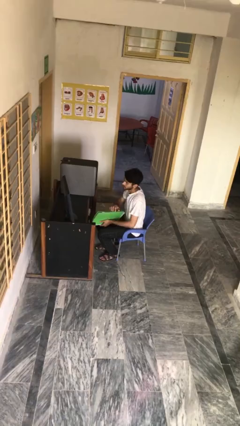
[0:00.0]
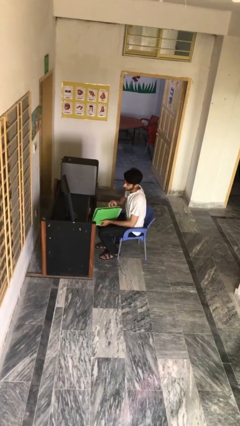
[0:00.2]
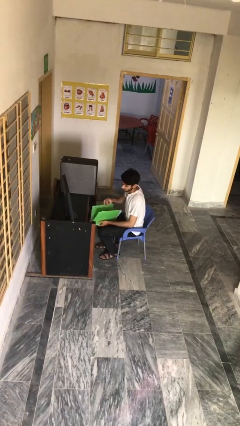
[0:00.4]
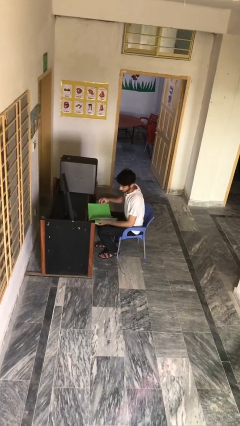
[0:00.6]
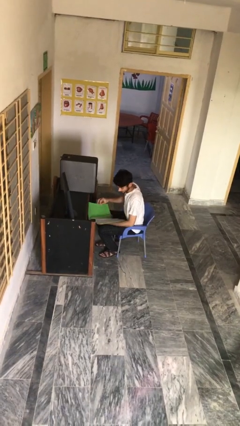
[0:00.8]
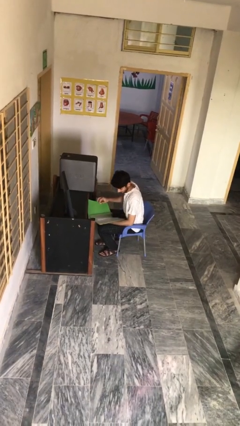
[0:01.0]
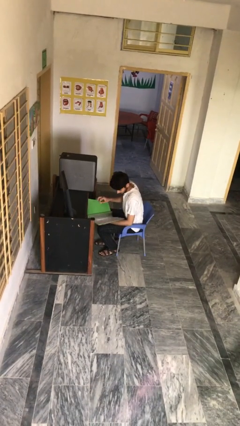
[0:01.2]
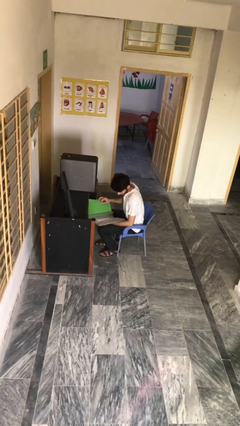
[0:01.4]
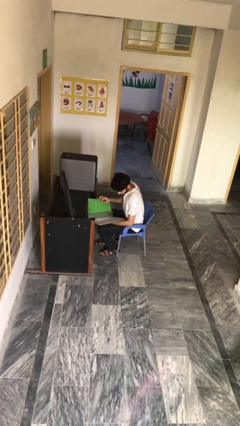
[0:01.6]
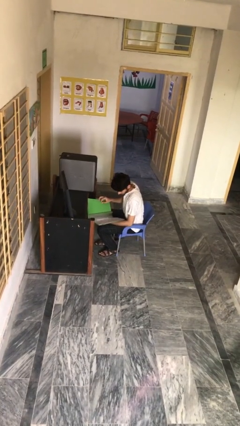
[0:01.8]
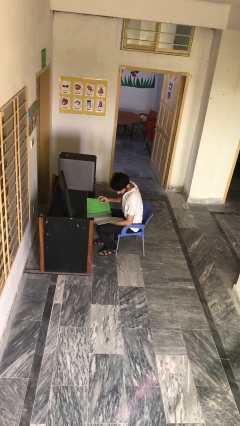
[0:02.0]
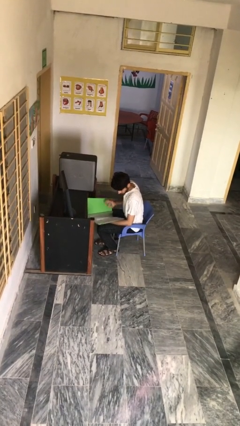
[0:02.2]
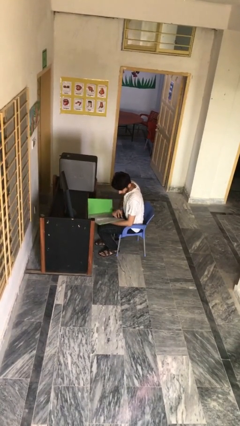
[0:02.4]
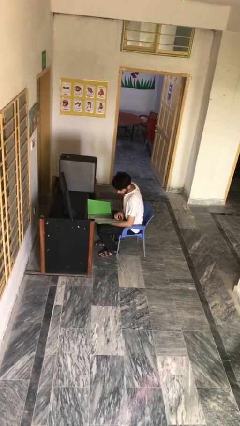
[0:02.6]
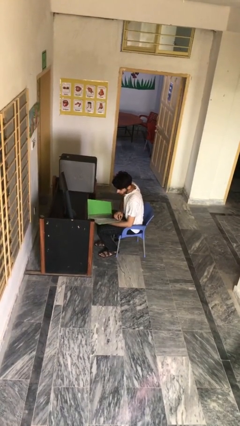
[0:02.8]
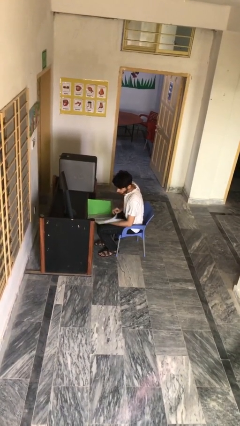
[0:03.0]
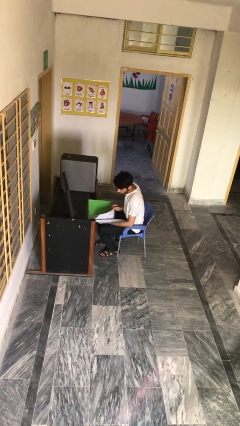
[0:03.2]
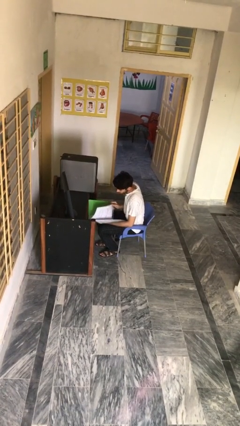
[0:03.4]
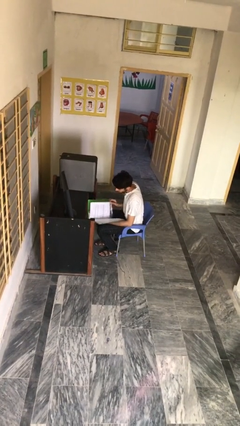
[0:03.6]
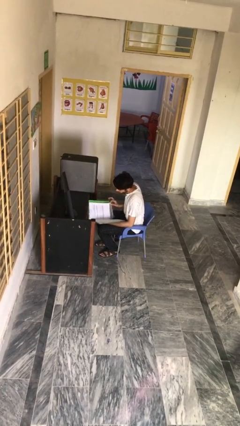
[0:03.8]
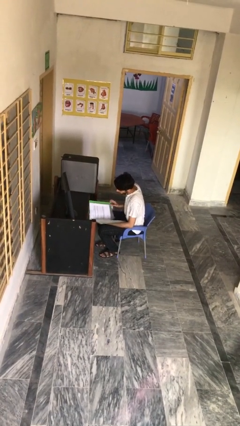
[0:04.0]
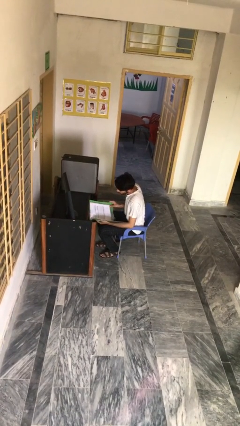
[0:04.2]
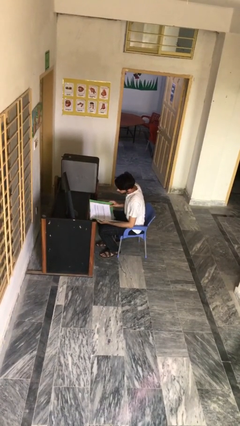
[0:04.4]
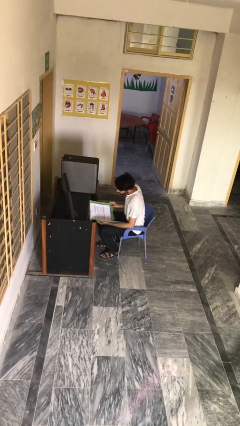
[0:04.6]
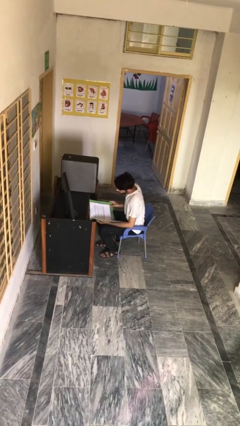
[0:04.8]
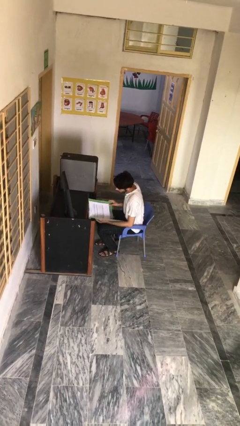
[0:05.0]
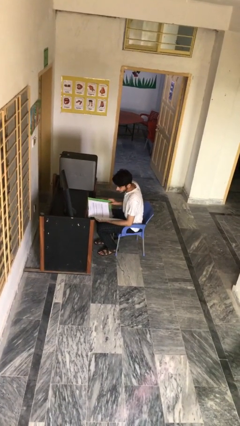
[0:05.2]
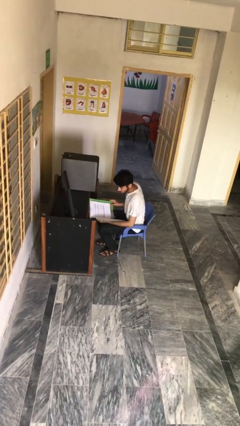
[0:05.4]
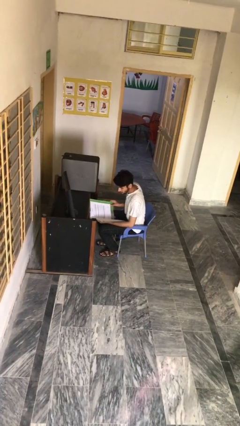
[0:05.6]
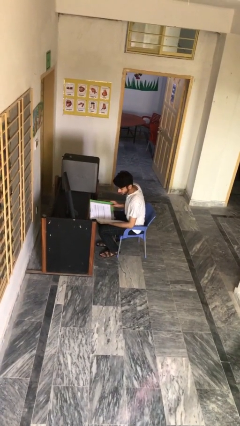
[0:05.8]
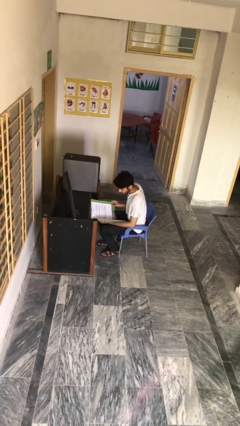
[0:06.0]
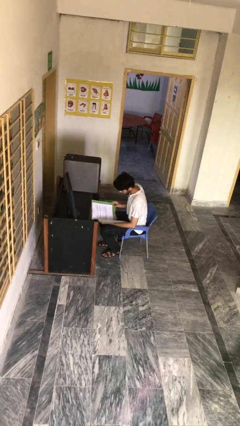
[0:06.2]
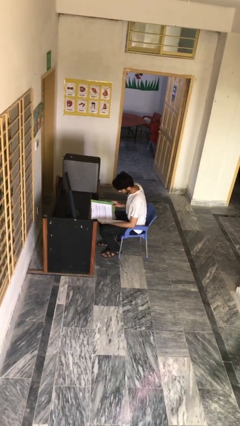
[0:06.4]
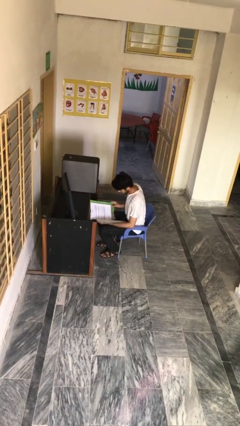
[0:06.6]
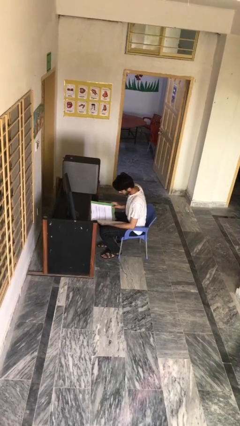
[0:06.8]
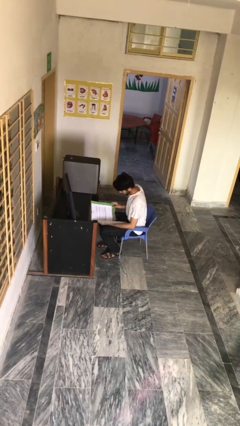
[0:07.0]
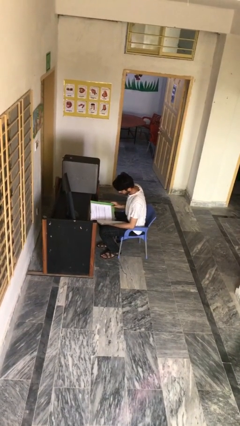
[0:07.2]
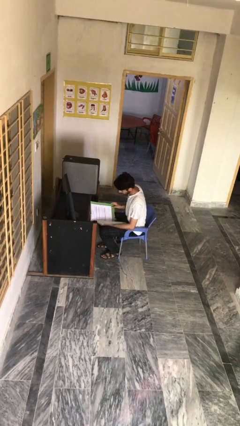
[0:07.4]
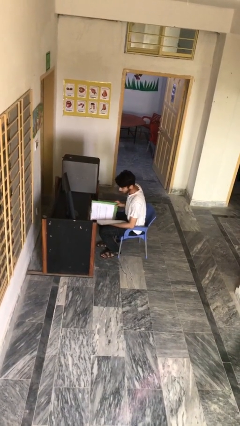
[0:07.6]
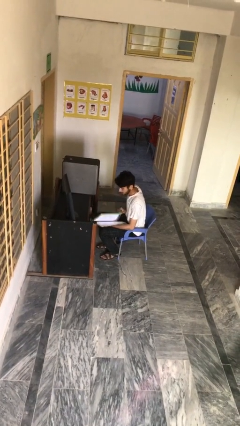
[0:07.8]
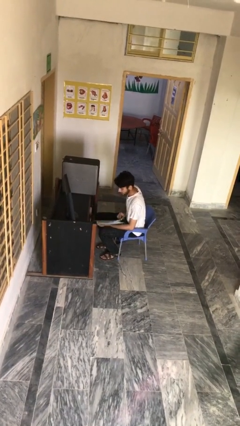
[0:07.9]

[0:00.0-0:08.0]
person reads document

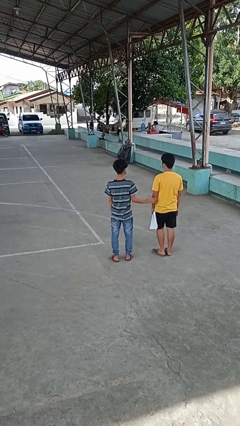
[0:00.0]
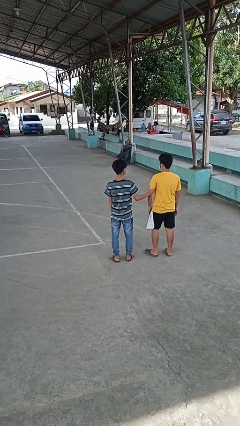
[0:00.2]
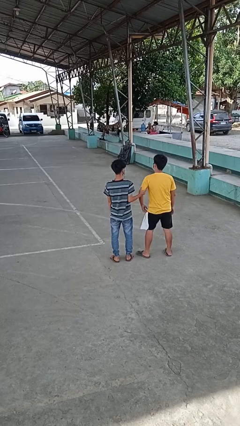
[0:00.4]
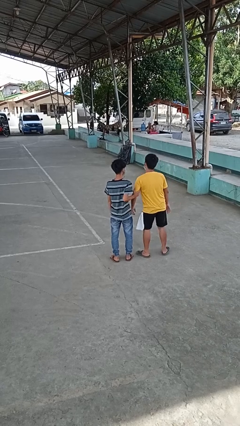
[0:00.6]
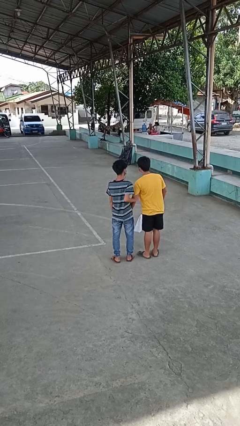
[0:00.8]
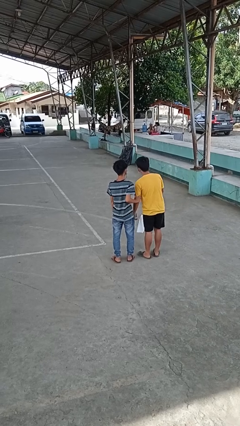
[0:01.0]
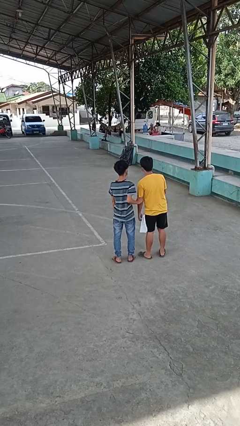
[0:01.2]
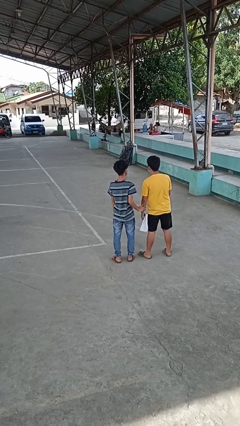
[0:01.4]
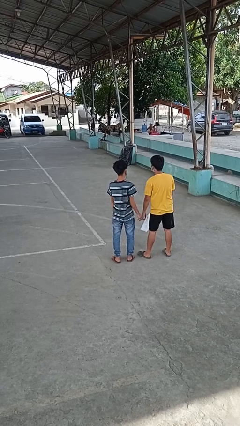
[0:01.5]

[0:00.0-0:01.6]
person grabs person by bicep

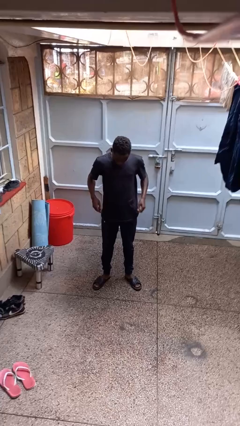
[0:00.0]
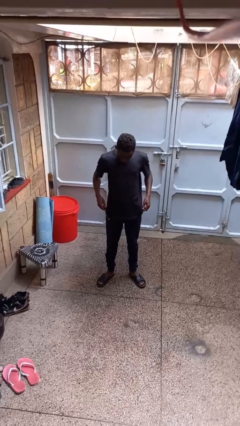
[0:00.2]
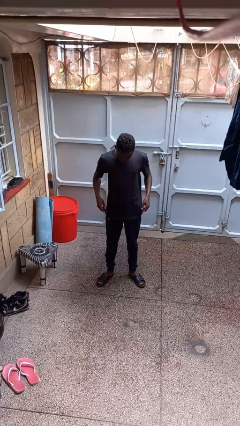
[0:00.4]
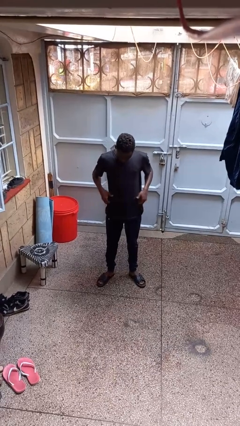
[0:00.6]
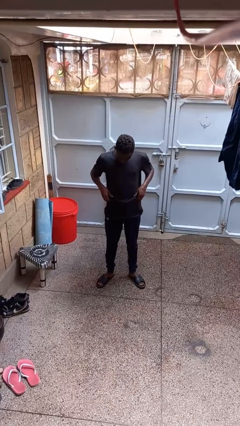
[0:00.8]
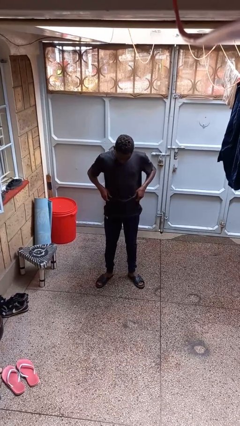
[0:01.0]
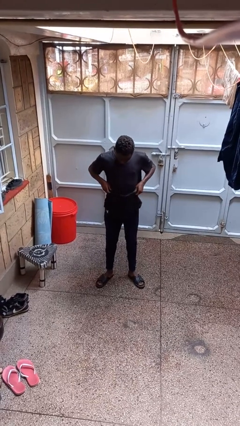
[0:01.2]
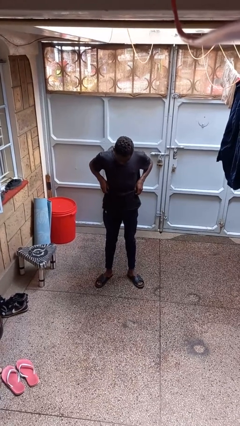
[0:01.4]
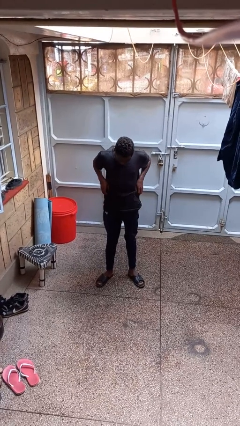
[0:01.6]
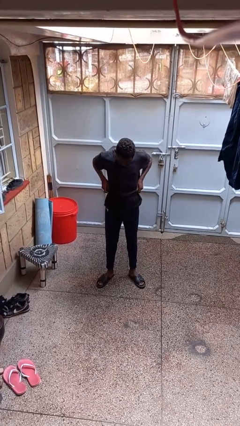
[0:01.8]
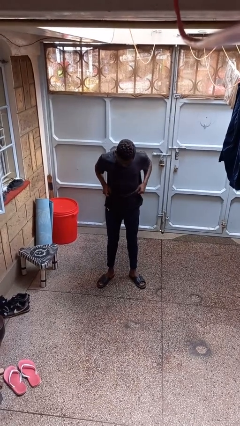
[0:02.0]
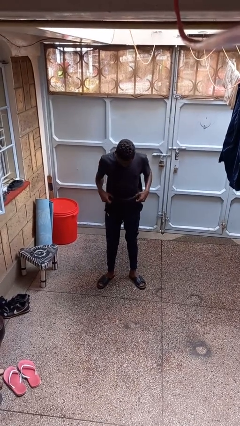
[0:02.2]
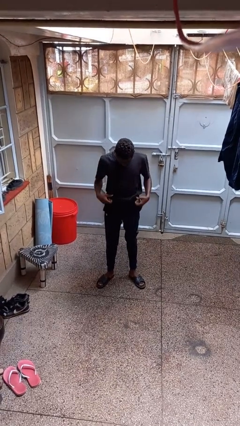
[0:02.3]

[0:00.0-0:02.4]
person hikes up pants

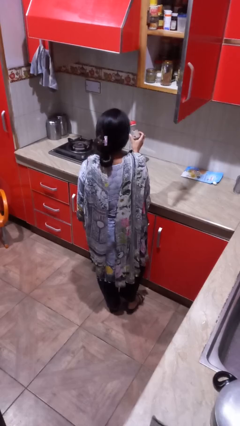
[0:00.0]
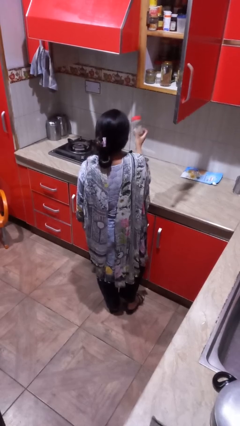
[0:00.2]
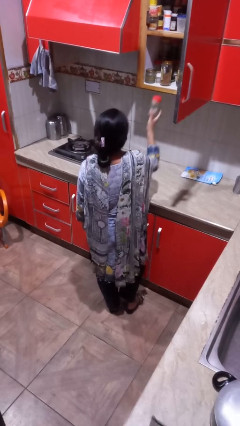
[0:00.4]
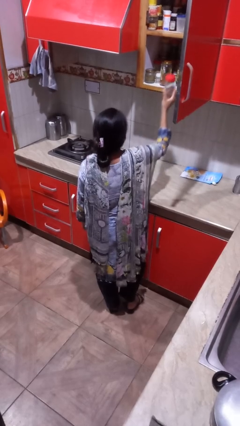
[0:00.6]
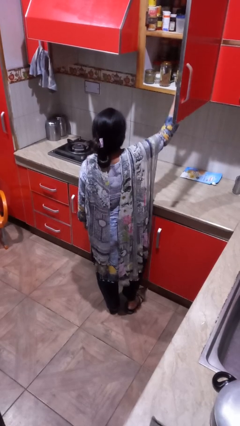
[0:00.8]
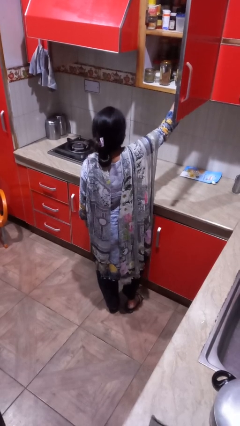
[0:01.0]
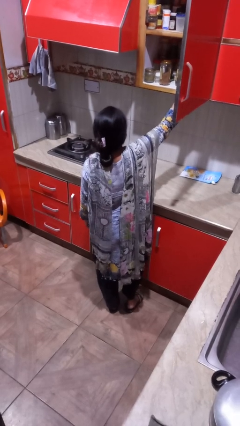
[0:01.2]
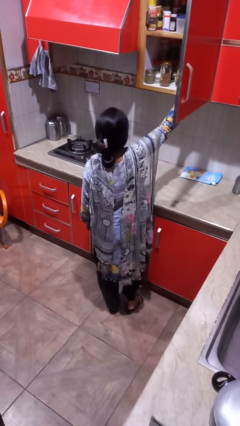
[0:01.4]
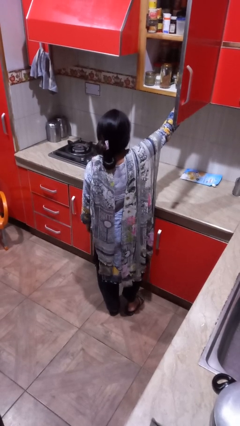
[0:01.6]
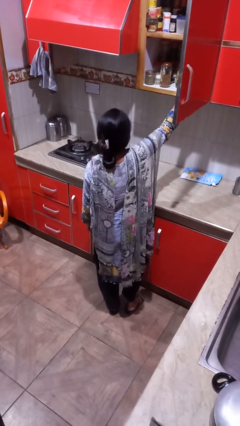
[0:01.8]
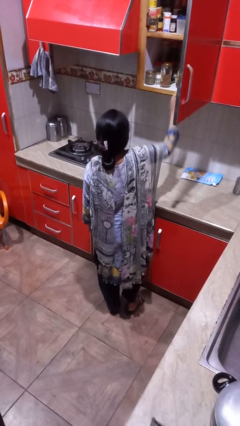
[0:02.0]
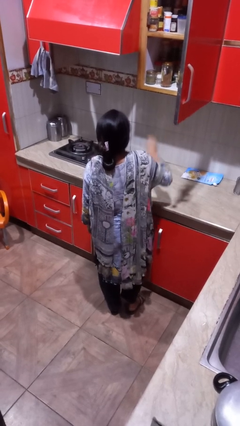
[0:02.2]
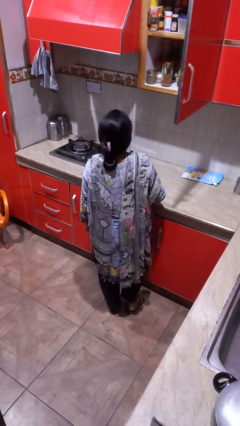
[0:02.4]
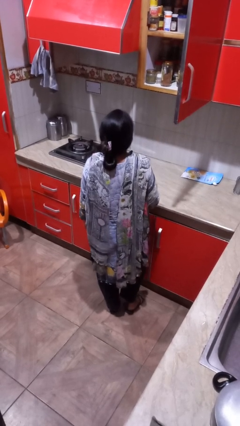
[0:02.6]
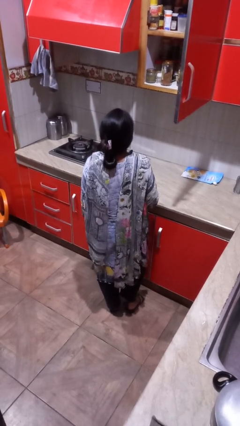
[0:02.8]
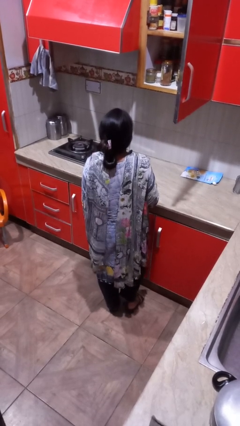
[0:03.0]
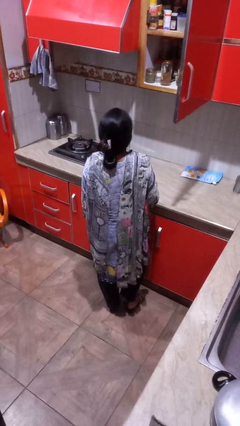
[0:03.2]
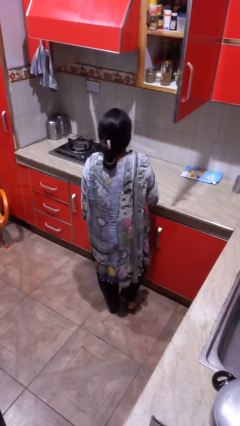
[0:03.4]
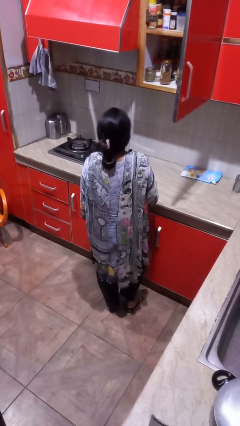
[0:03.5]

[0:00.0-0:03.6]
person puts object in cabinet

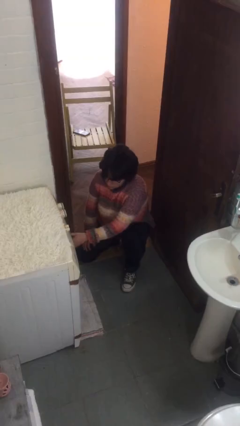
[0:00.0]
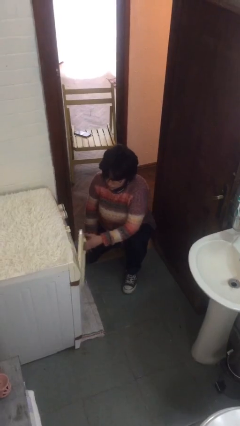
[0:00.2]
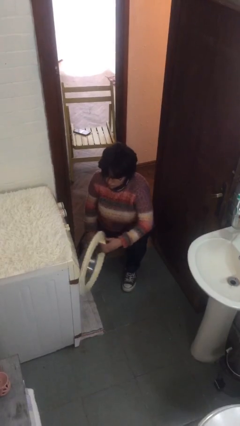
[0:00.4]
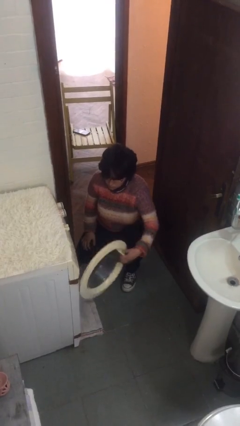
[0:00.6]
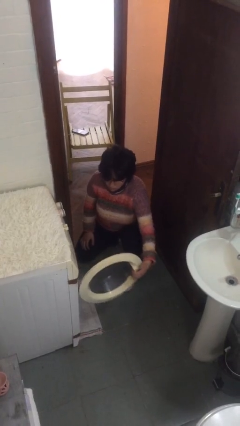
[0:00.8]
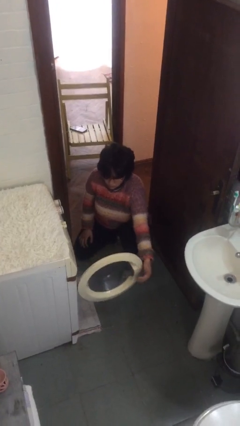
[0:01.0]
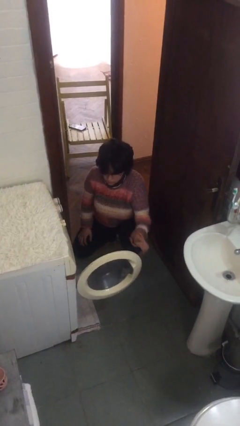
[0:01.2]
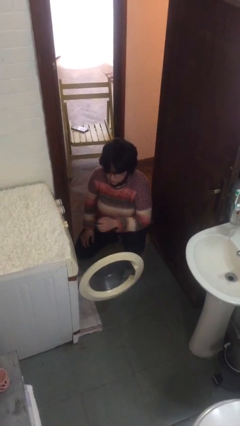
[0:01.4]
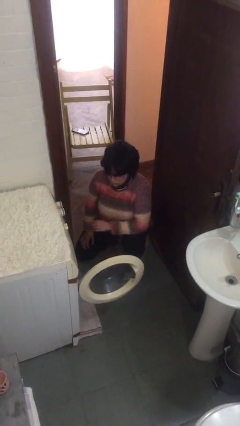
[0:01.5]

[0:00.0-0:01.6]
person opens suitcase

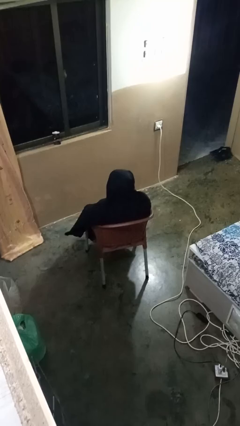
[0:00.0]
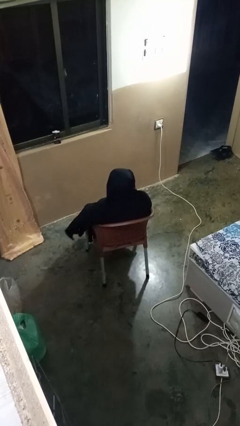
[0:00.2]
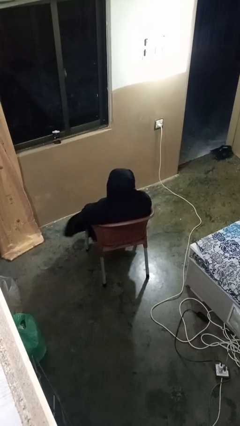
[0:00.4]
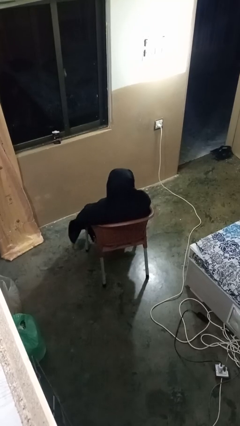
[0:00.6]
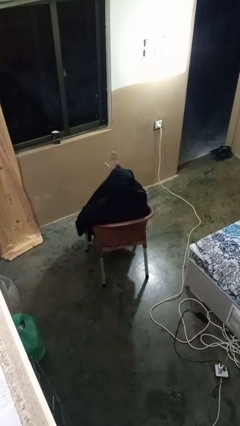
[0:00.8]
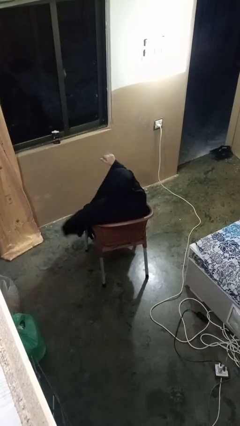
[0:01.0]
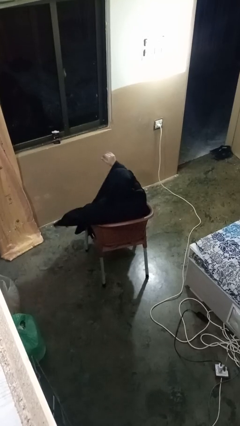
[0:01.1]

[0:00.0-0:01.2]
person gestures come here
